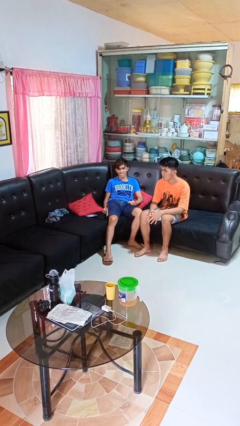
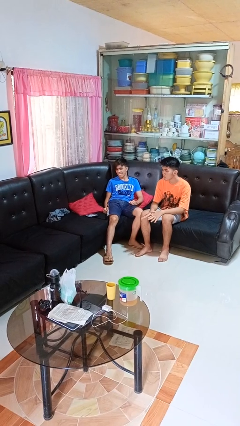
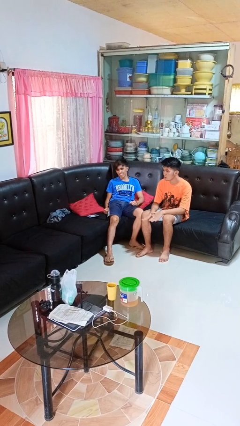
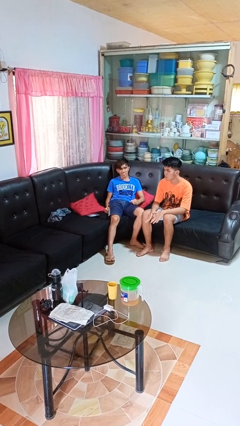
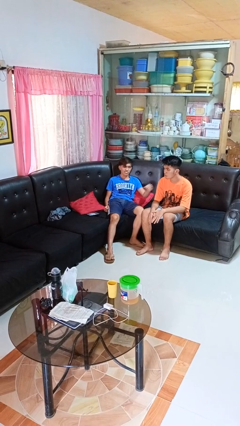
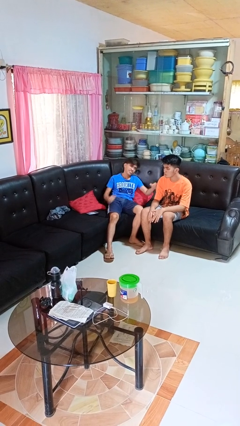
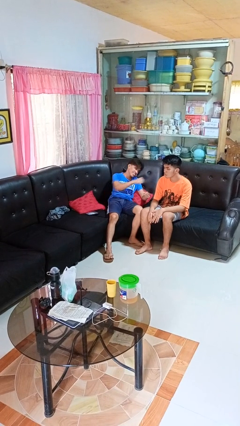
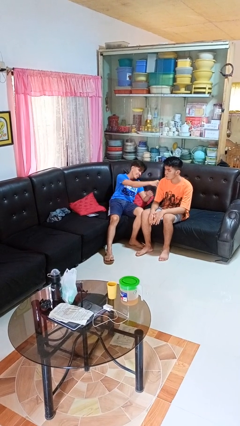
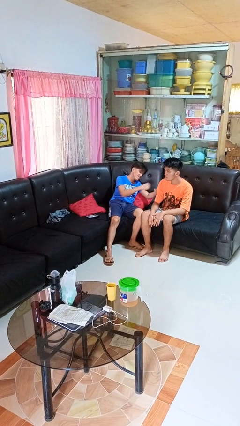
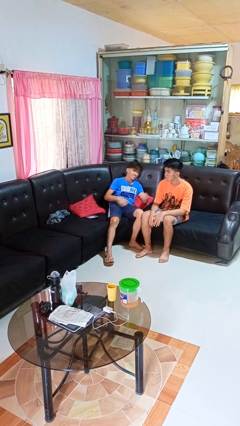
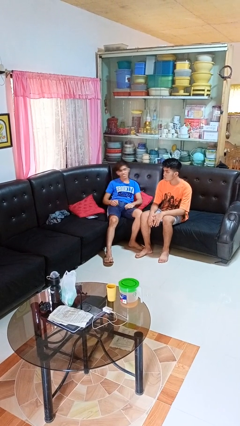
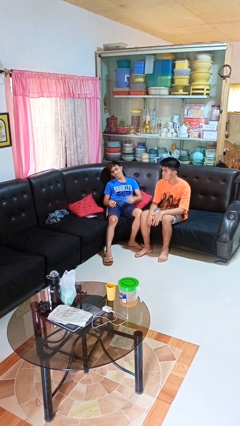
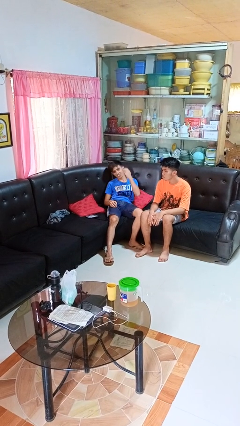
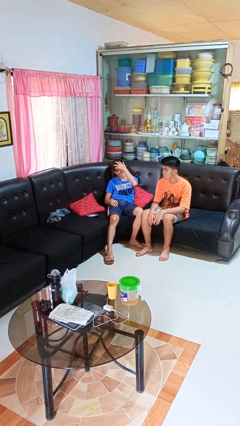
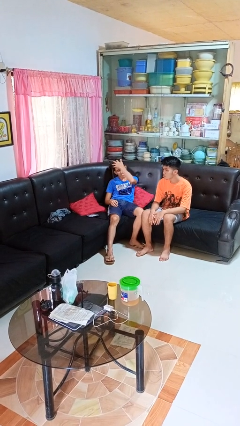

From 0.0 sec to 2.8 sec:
person pounds shoulders of person

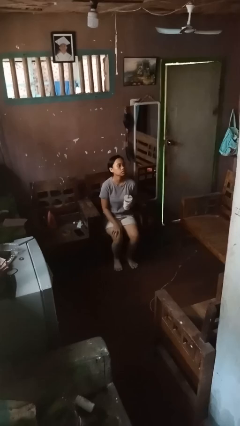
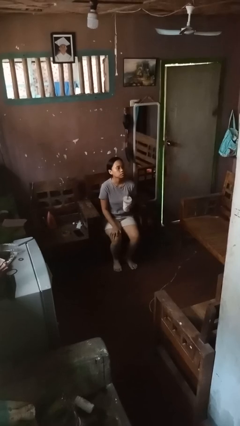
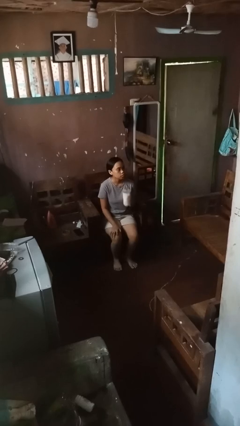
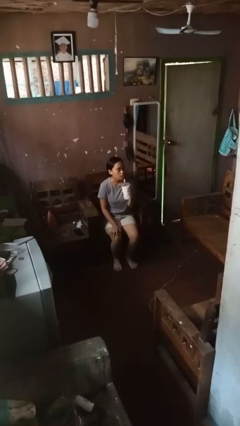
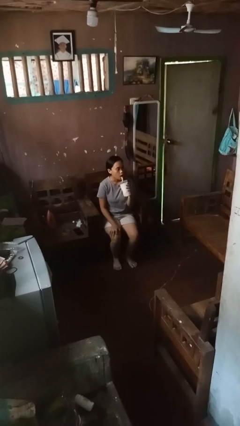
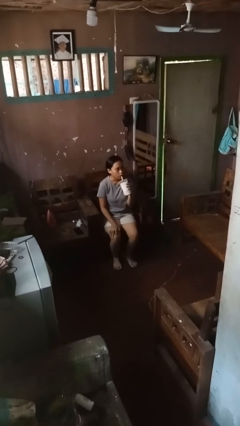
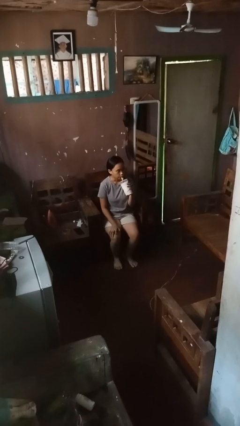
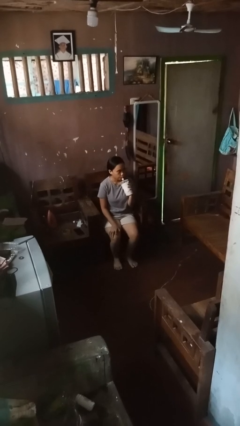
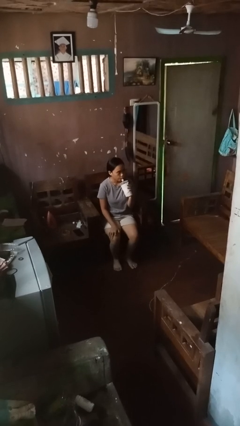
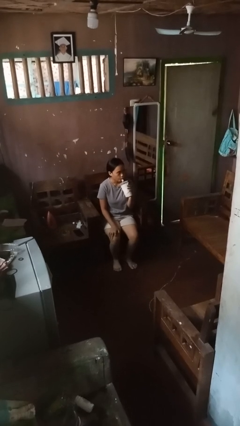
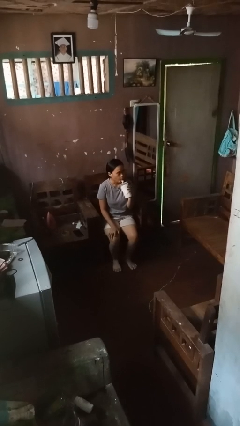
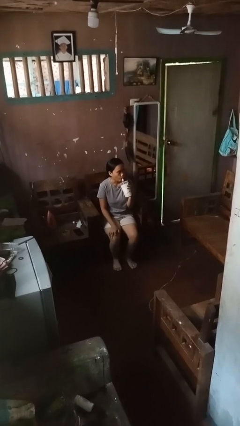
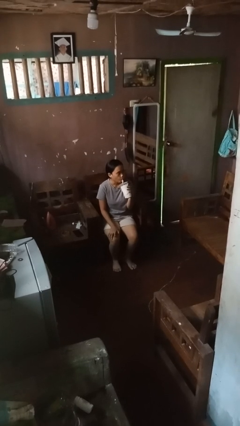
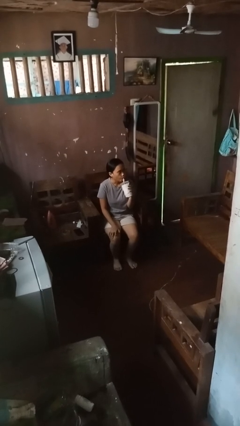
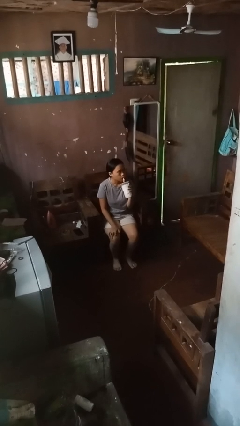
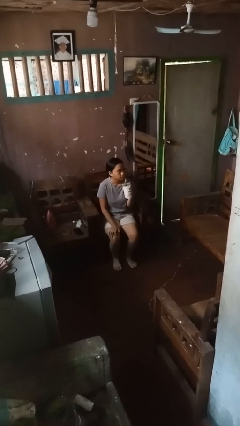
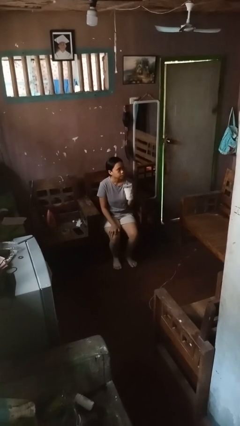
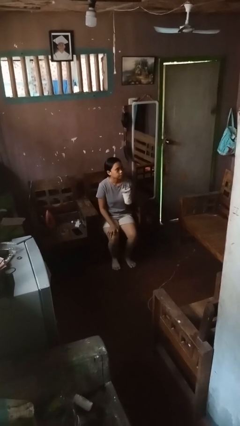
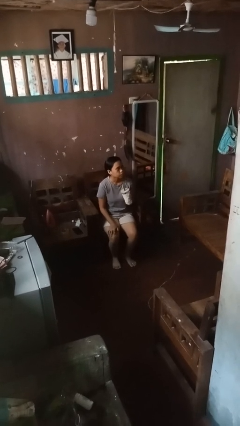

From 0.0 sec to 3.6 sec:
person drinks from straw

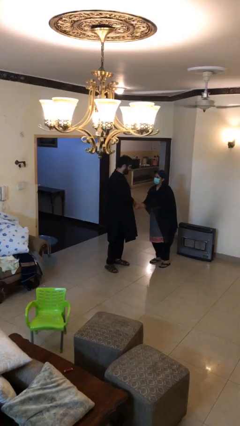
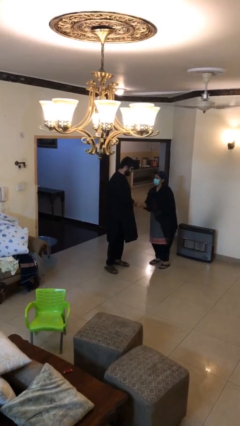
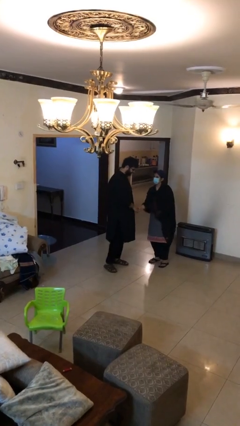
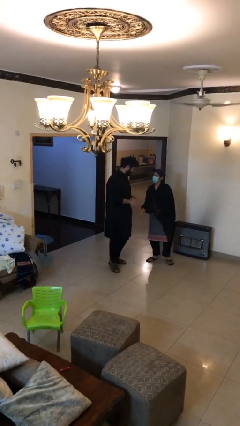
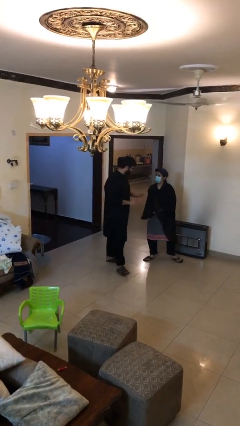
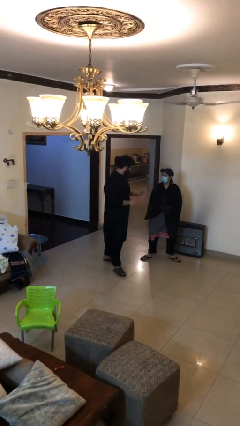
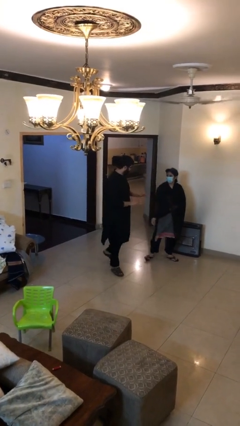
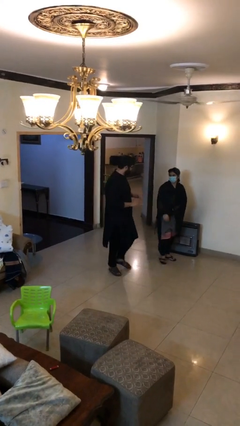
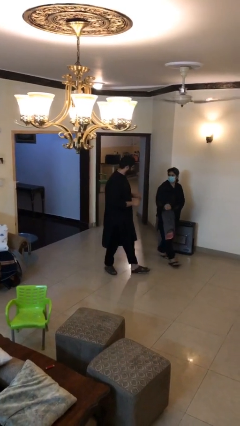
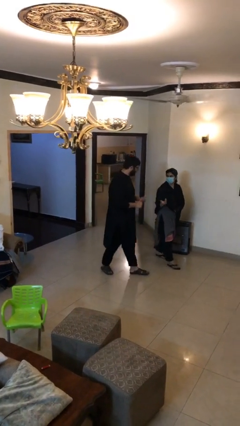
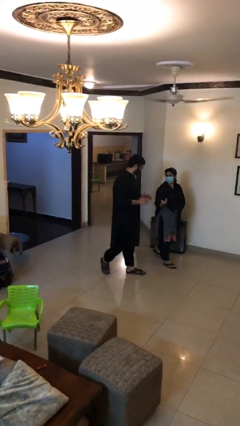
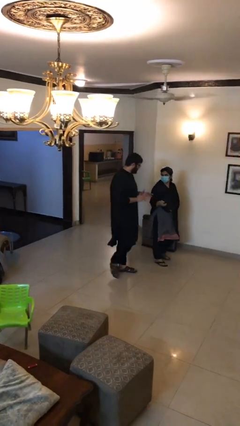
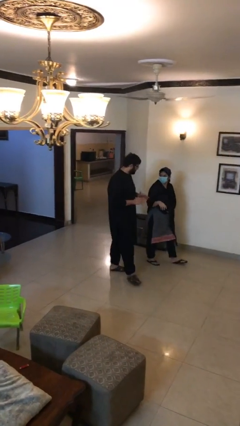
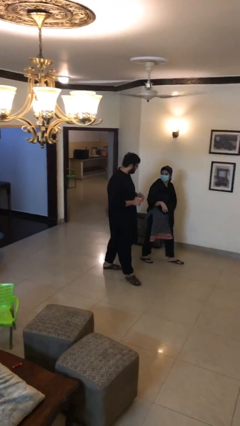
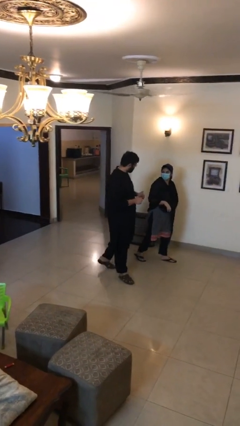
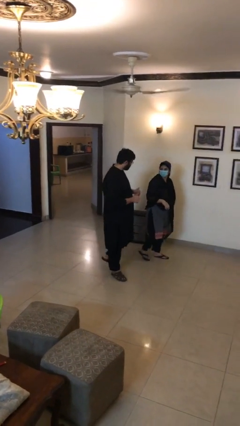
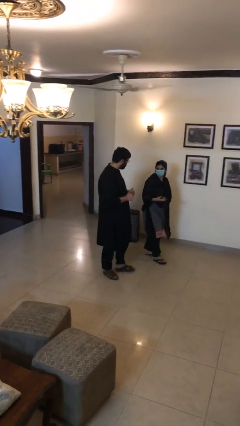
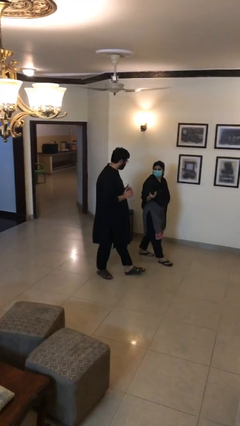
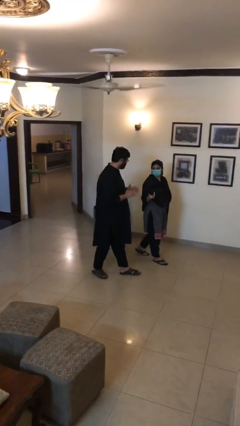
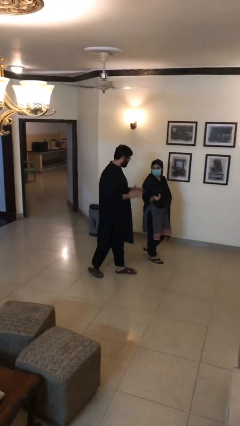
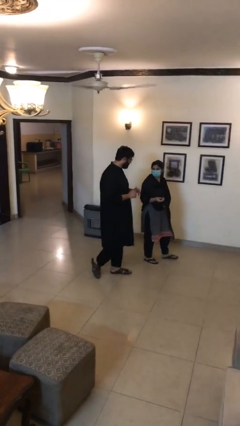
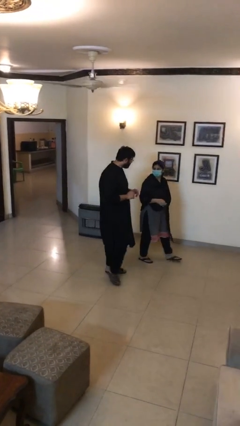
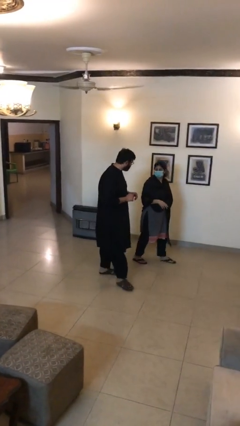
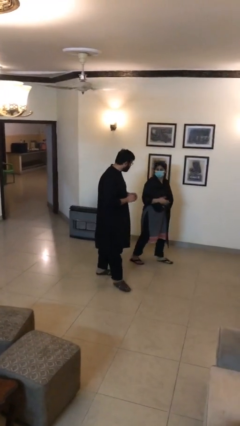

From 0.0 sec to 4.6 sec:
person talks to person

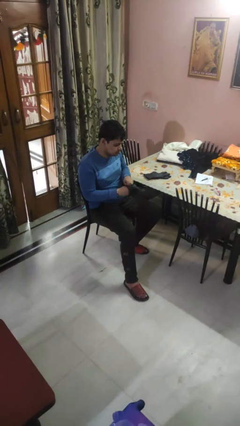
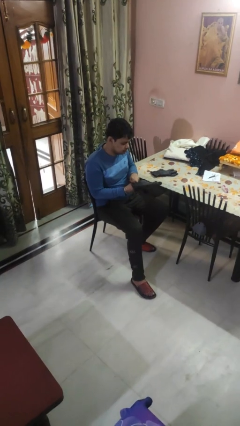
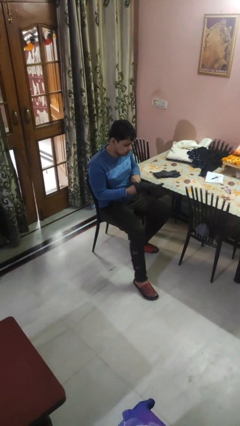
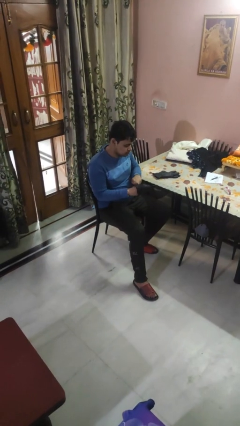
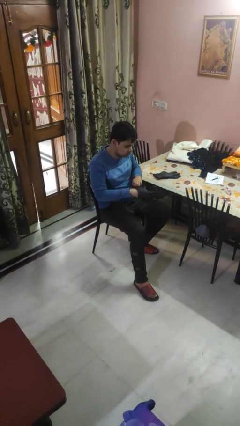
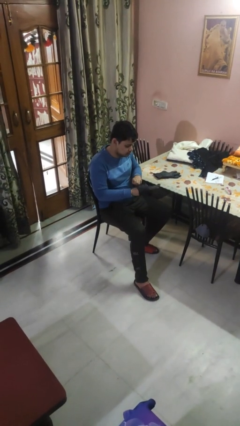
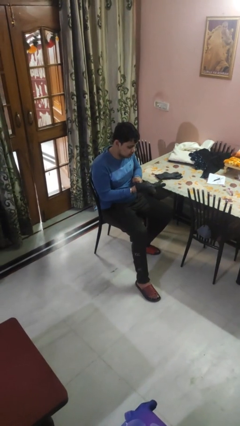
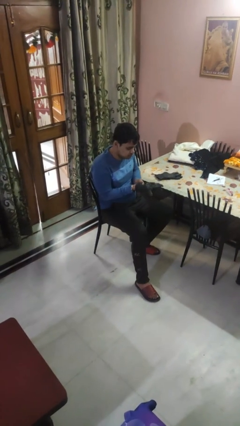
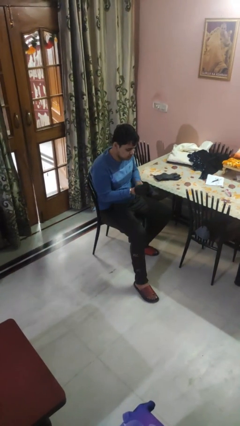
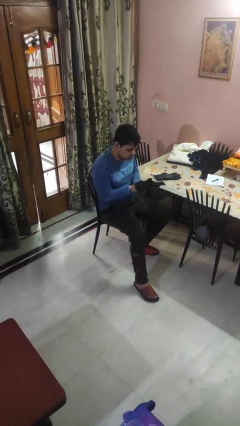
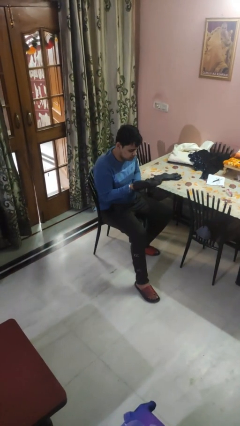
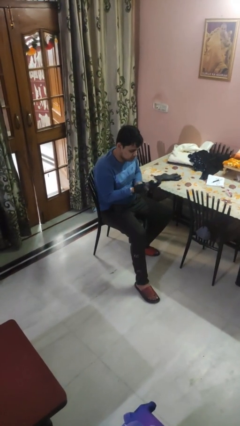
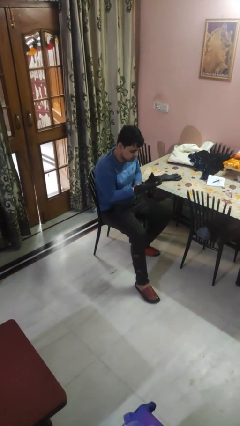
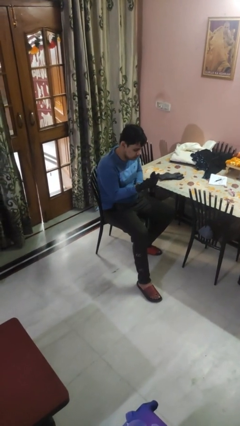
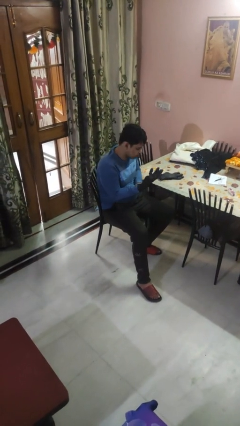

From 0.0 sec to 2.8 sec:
person puts on gloves

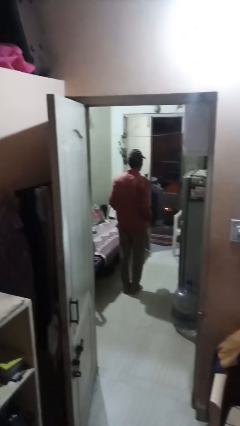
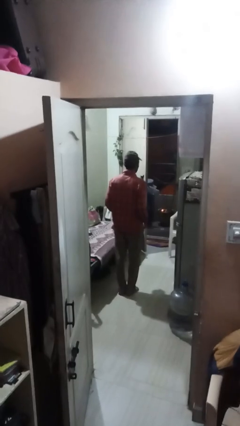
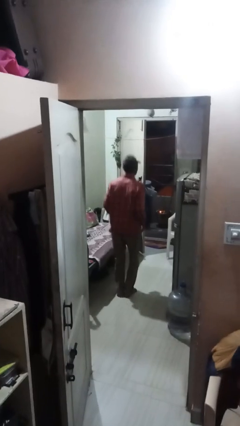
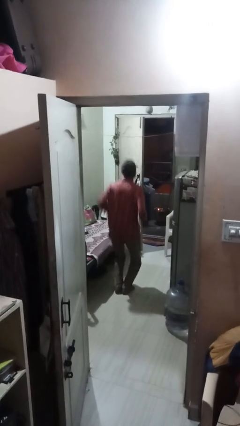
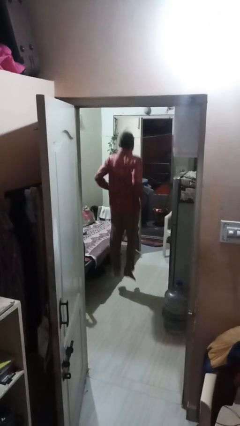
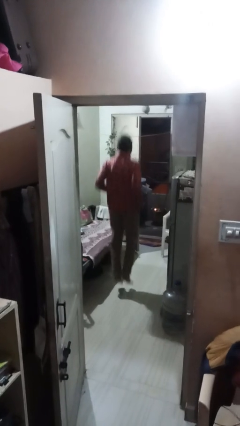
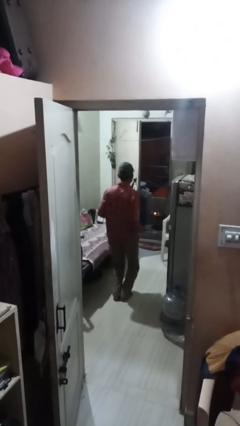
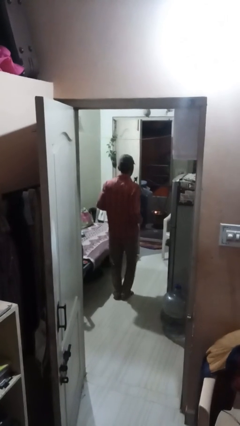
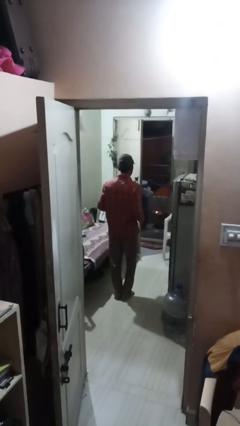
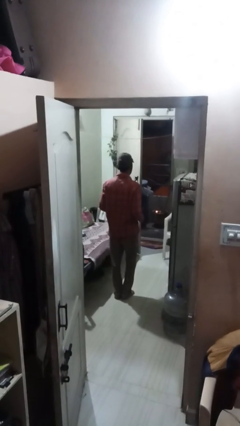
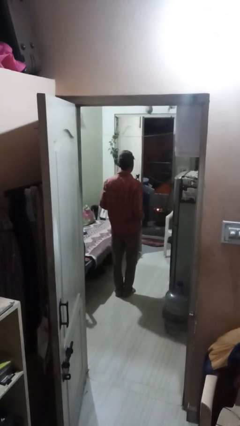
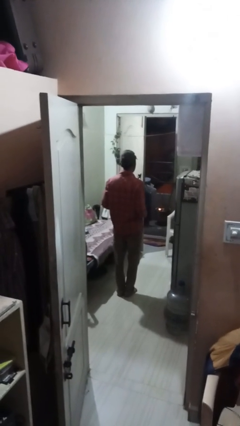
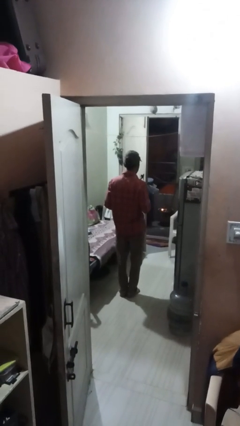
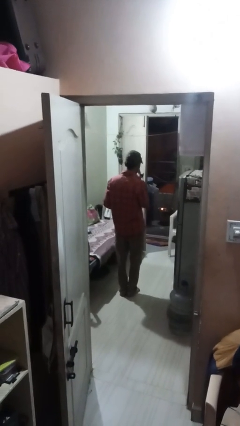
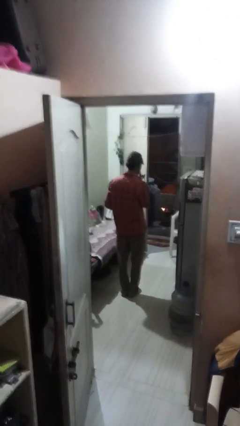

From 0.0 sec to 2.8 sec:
person jumps

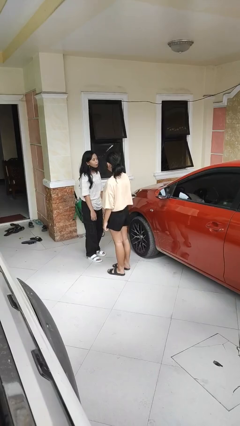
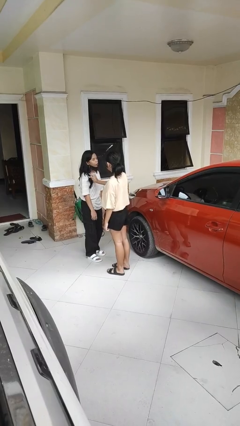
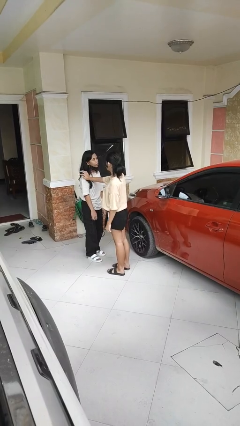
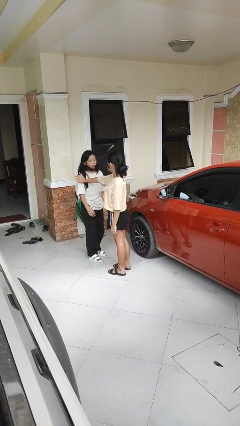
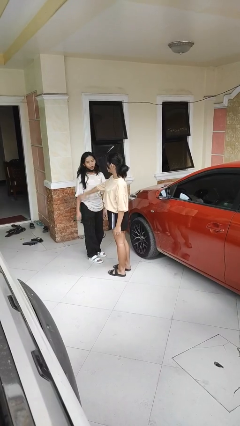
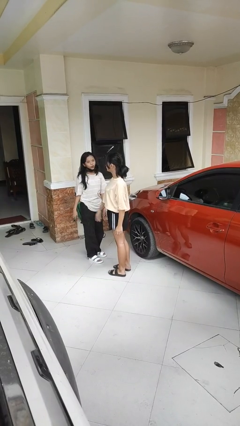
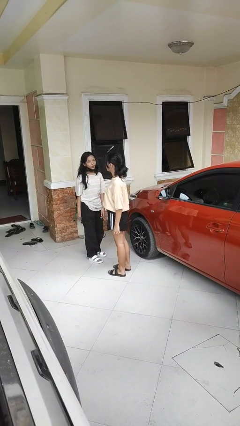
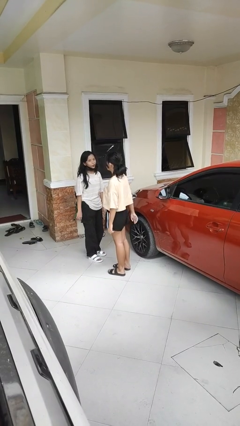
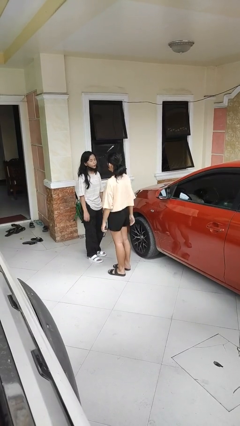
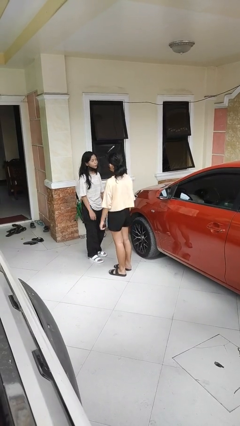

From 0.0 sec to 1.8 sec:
person shoves person
